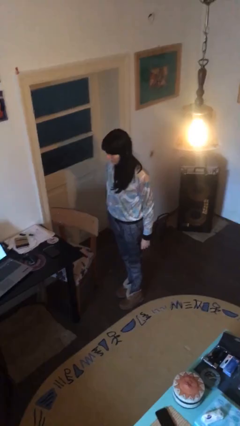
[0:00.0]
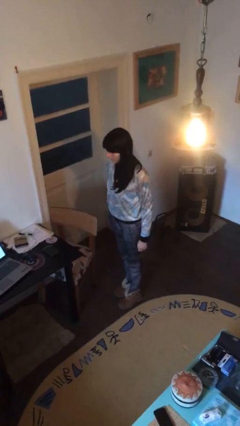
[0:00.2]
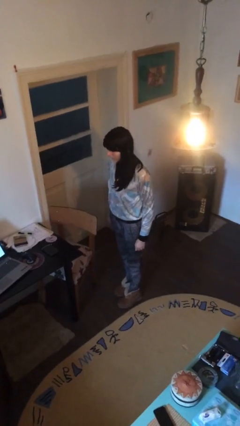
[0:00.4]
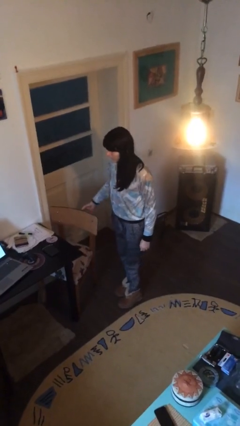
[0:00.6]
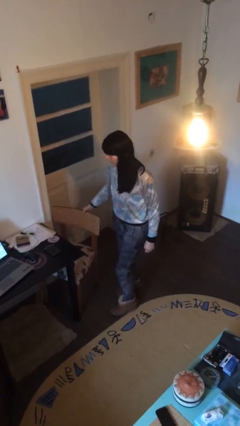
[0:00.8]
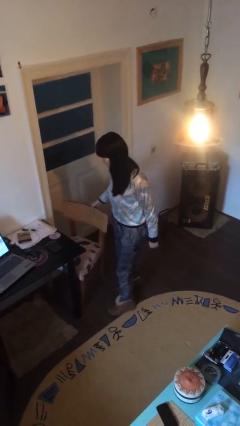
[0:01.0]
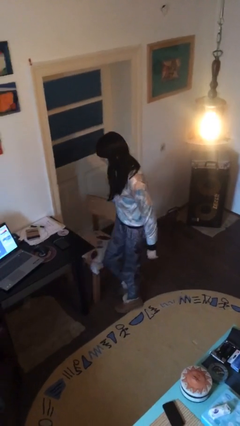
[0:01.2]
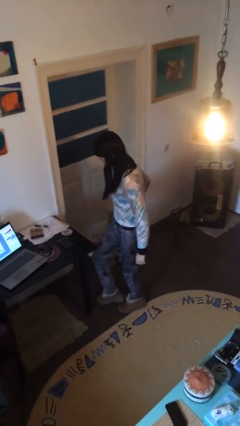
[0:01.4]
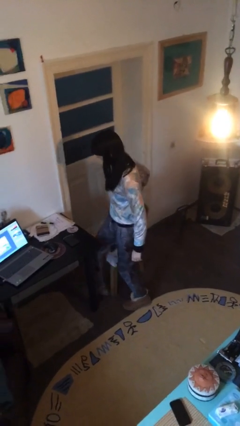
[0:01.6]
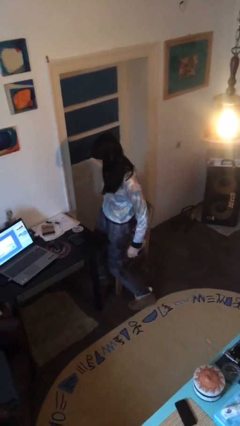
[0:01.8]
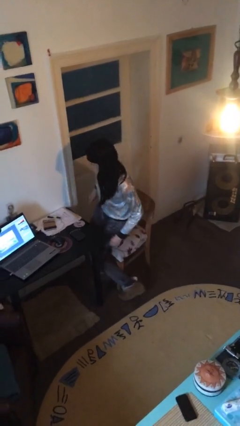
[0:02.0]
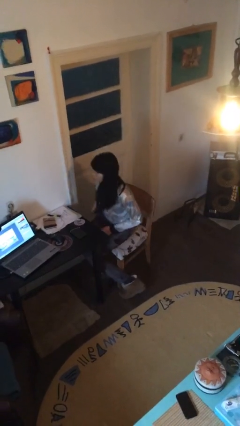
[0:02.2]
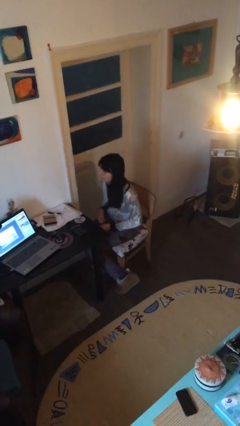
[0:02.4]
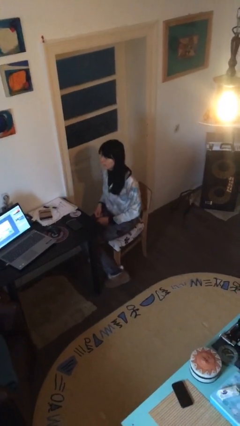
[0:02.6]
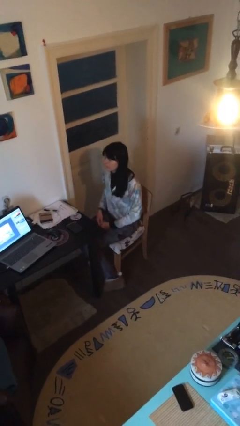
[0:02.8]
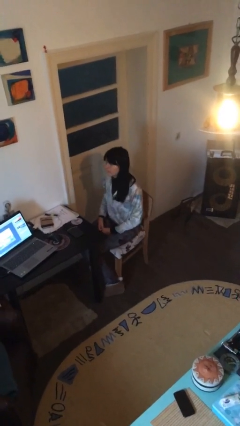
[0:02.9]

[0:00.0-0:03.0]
person sits down

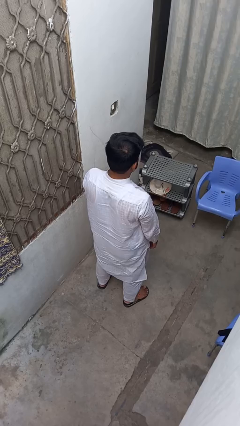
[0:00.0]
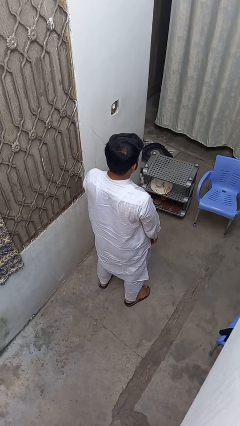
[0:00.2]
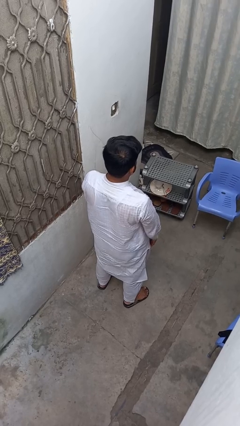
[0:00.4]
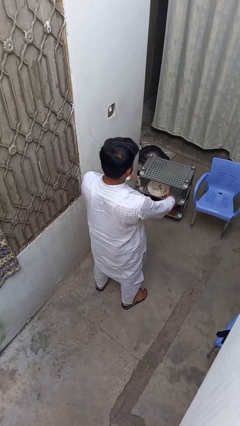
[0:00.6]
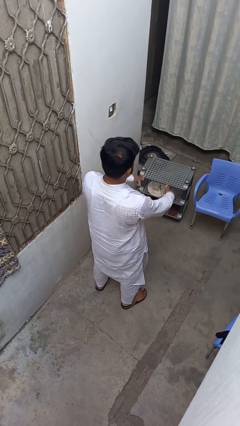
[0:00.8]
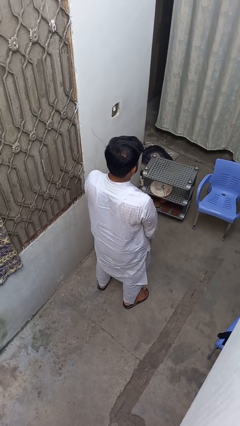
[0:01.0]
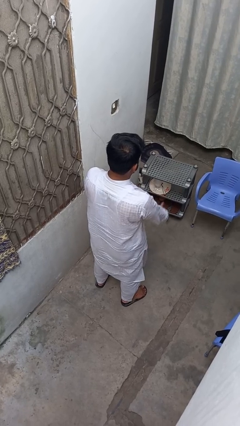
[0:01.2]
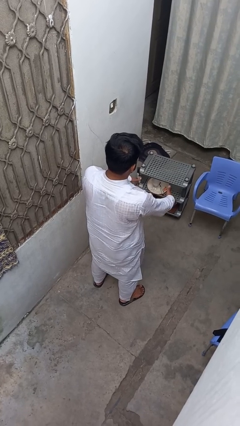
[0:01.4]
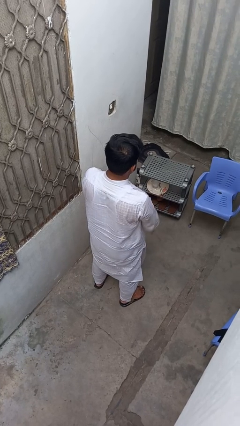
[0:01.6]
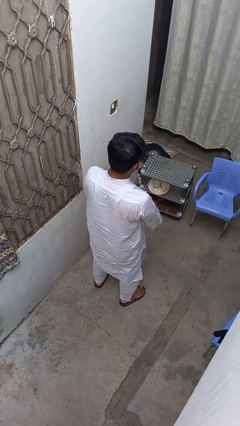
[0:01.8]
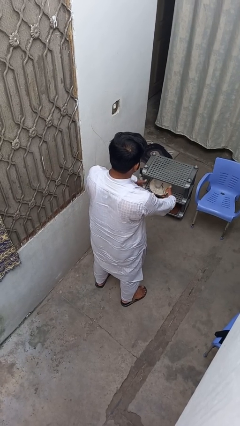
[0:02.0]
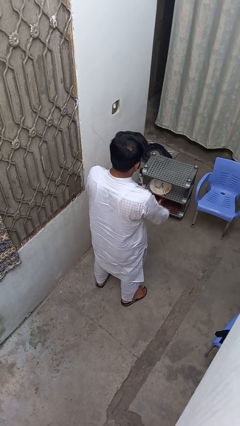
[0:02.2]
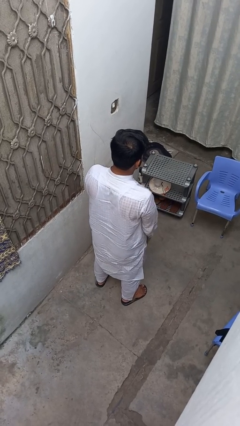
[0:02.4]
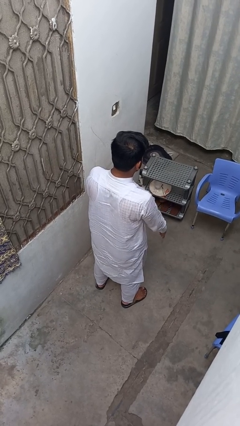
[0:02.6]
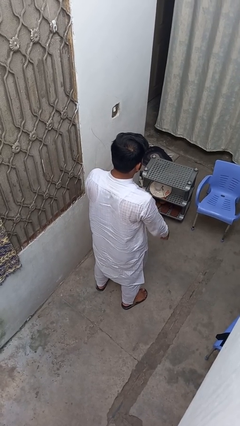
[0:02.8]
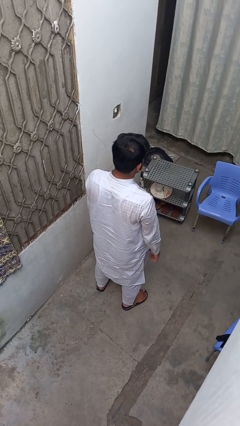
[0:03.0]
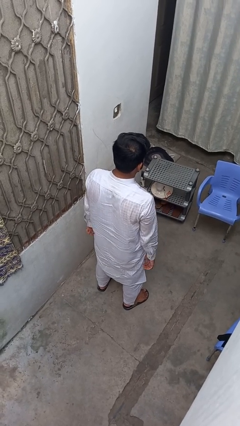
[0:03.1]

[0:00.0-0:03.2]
person slaps hands on thighs

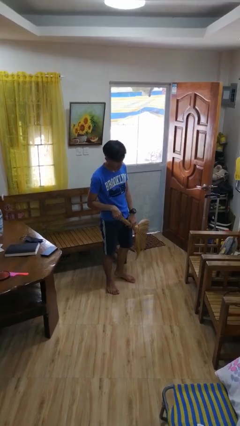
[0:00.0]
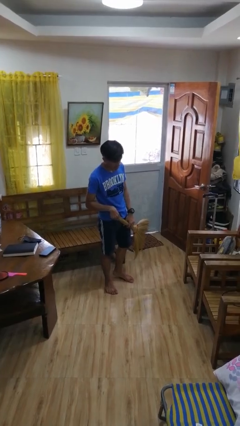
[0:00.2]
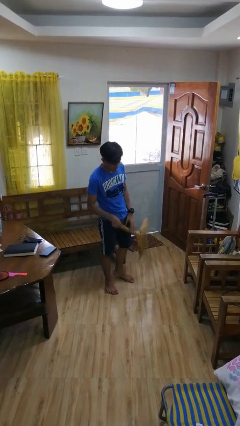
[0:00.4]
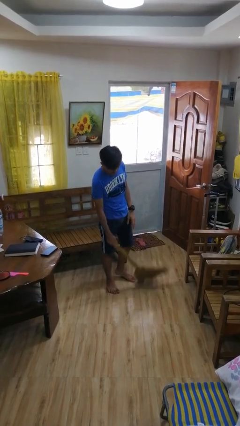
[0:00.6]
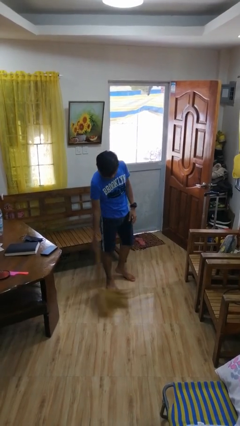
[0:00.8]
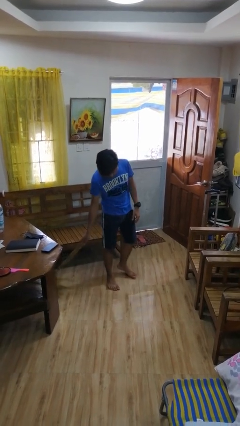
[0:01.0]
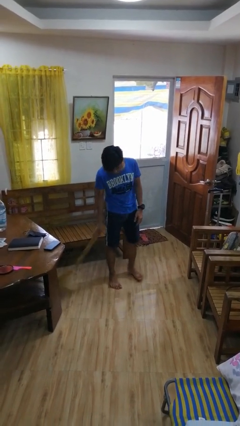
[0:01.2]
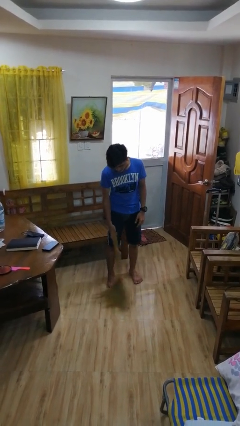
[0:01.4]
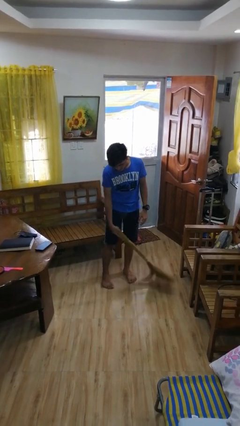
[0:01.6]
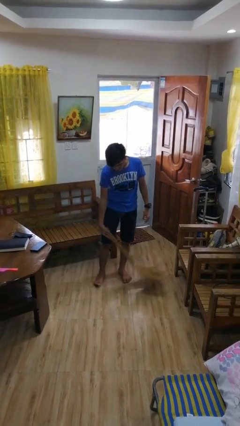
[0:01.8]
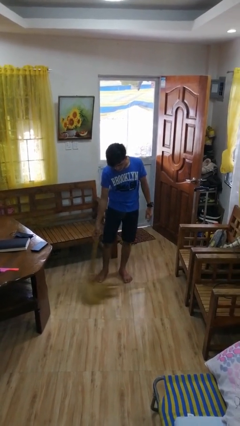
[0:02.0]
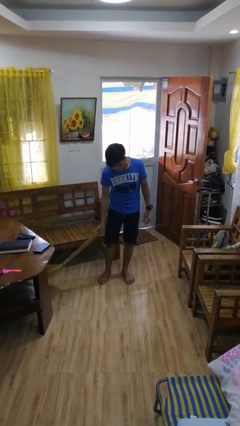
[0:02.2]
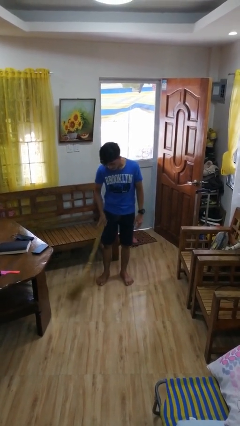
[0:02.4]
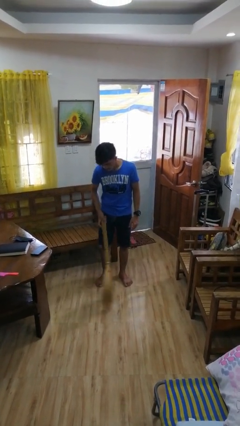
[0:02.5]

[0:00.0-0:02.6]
person sweeps floor

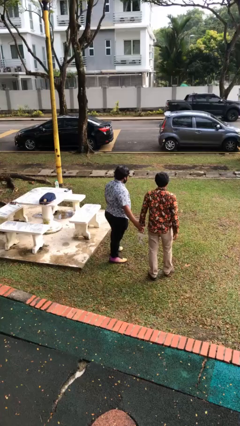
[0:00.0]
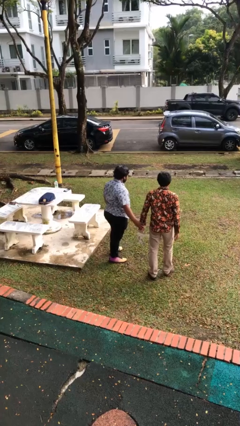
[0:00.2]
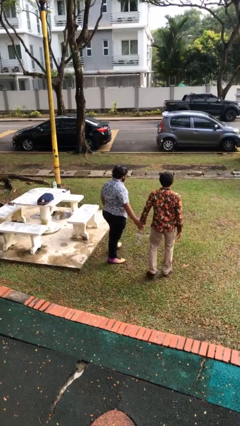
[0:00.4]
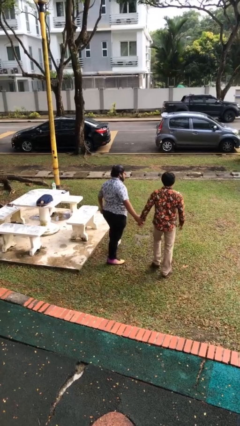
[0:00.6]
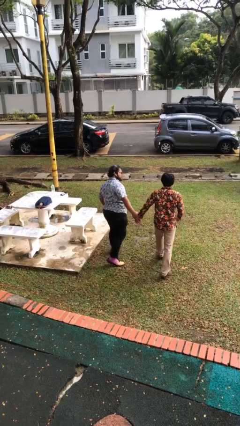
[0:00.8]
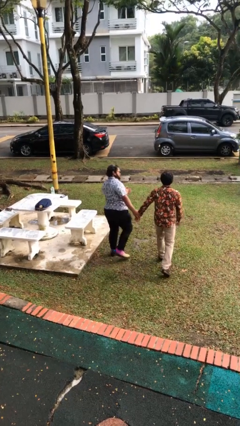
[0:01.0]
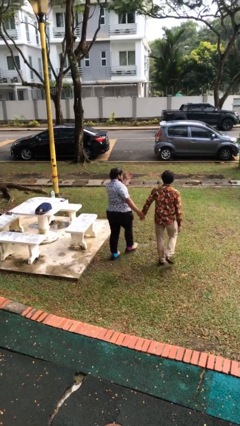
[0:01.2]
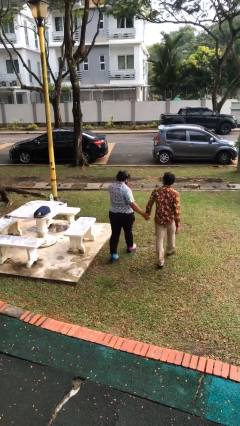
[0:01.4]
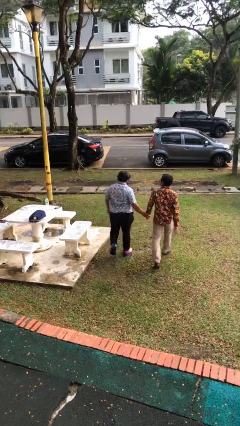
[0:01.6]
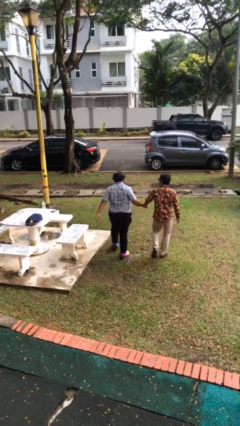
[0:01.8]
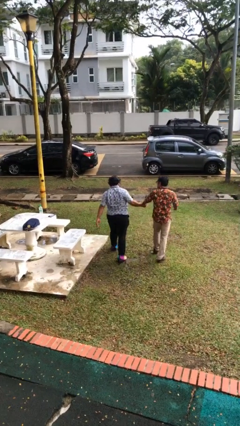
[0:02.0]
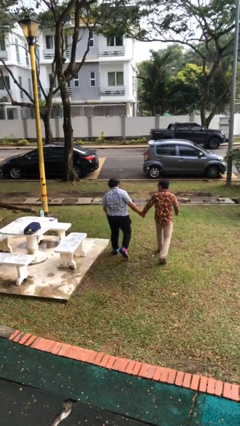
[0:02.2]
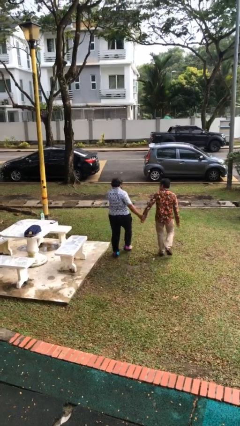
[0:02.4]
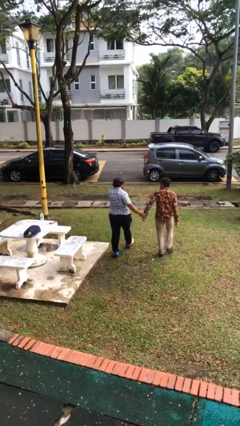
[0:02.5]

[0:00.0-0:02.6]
person holds hand

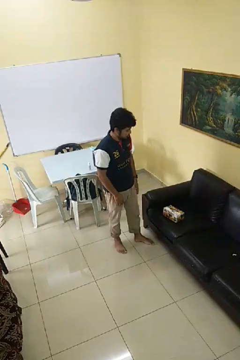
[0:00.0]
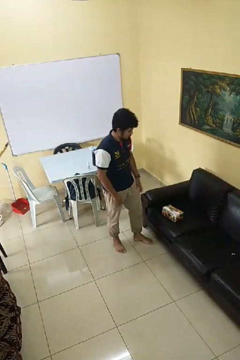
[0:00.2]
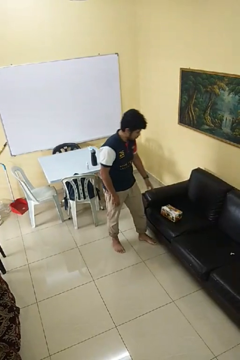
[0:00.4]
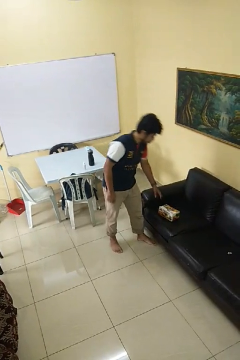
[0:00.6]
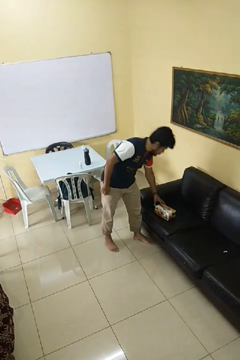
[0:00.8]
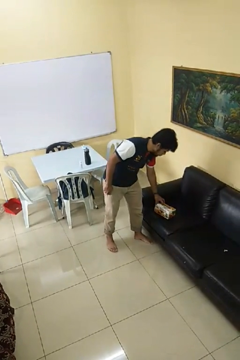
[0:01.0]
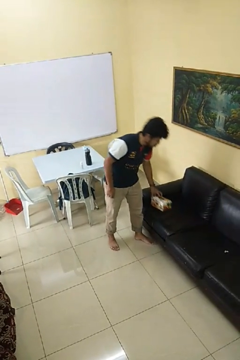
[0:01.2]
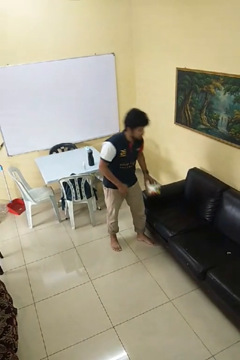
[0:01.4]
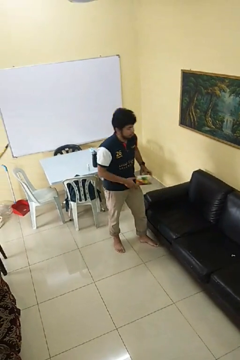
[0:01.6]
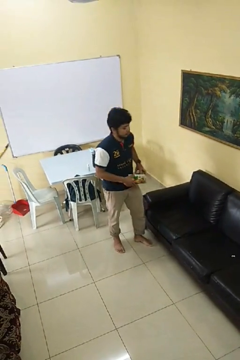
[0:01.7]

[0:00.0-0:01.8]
person picks up object from couch

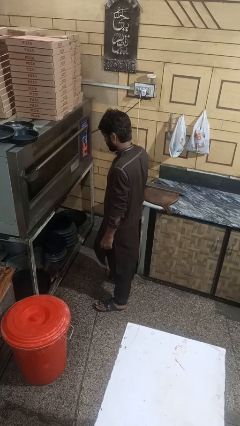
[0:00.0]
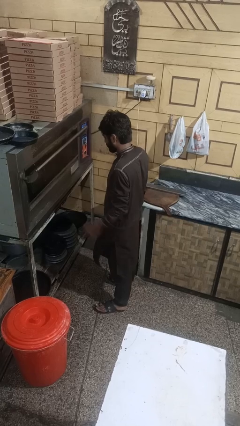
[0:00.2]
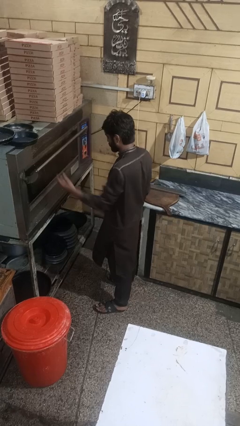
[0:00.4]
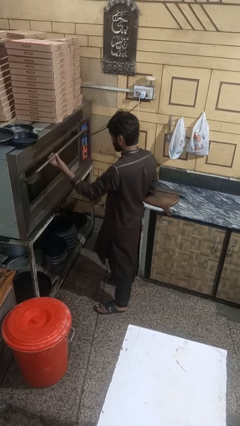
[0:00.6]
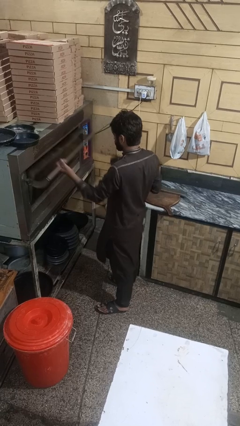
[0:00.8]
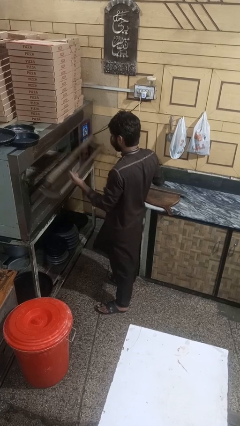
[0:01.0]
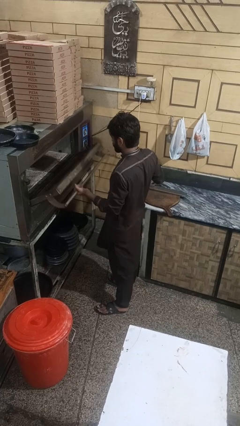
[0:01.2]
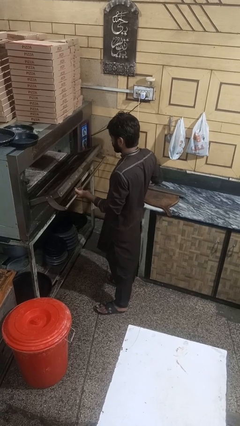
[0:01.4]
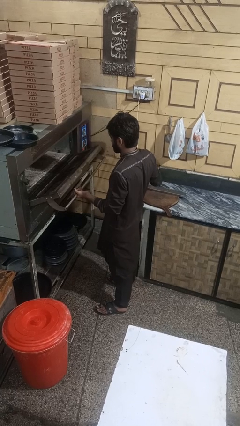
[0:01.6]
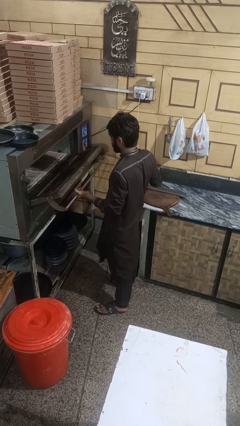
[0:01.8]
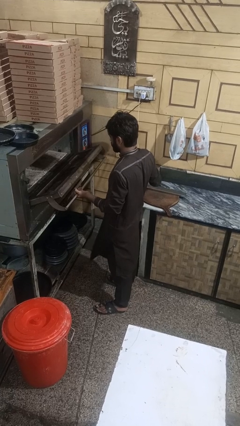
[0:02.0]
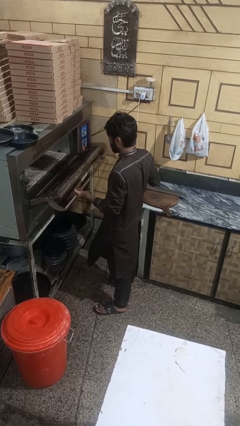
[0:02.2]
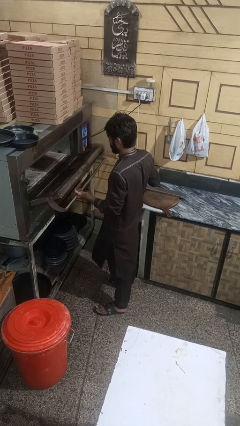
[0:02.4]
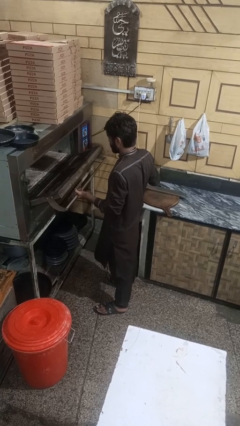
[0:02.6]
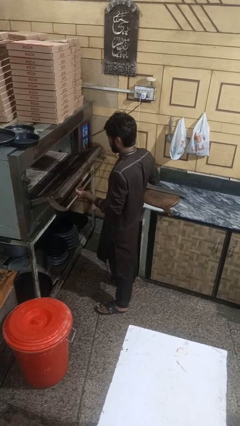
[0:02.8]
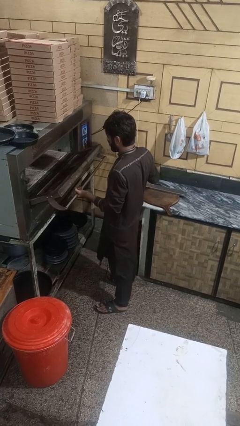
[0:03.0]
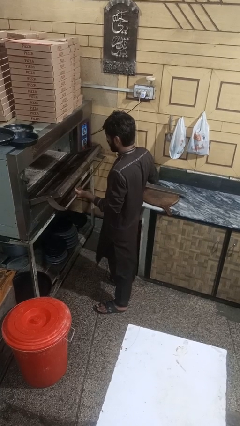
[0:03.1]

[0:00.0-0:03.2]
person opens microwave

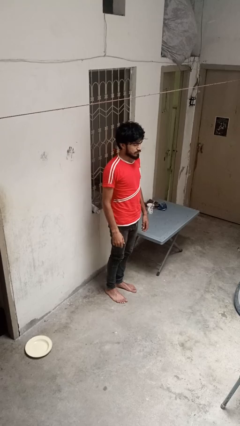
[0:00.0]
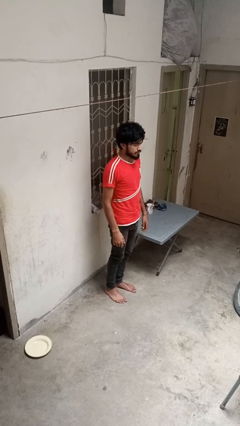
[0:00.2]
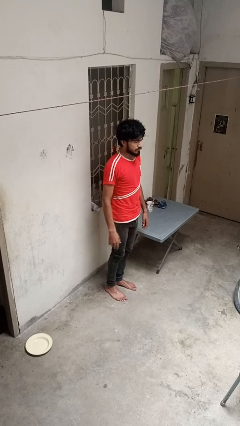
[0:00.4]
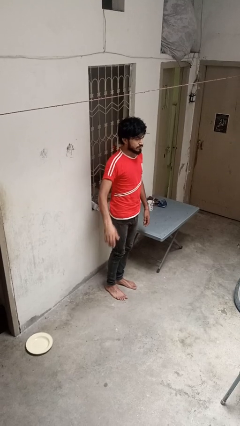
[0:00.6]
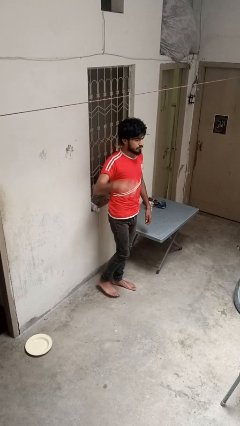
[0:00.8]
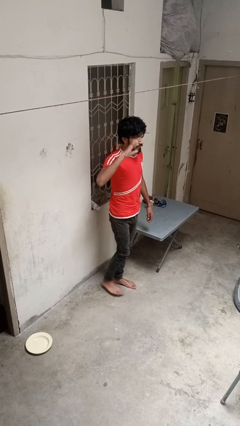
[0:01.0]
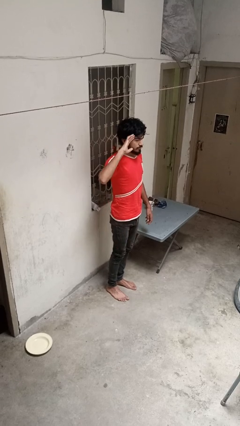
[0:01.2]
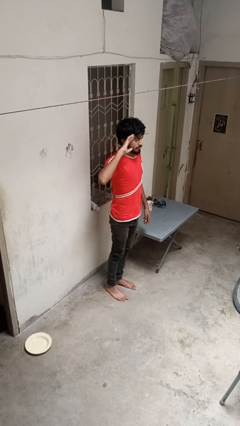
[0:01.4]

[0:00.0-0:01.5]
person salutes
